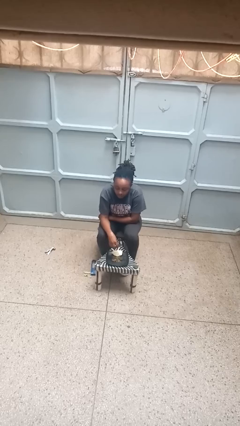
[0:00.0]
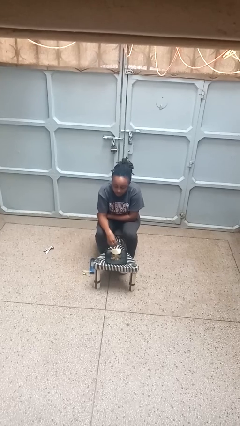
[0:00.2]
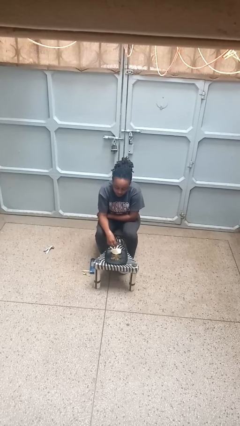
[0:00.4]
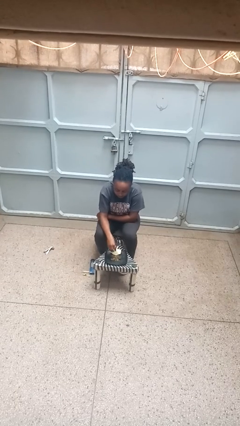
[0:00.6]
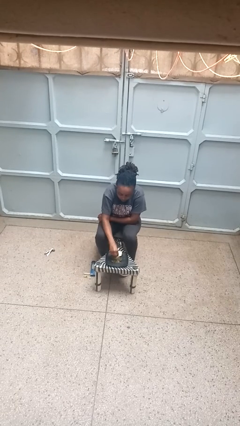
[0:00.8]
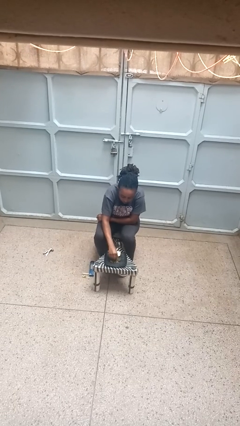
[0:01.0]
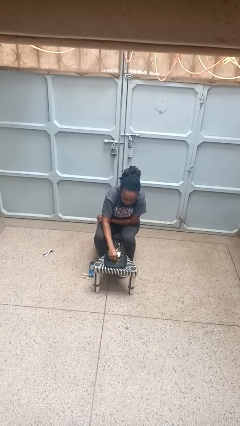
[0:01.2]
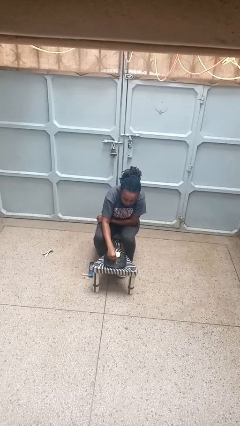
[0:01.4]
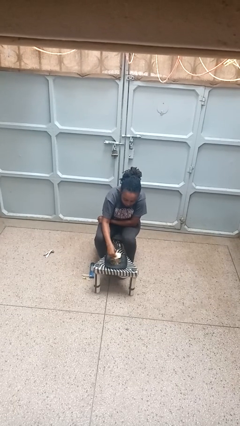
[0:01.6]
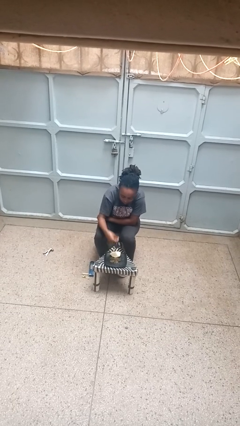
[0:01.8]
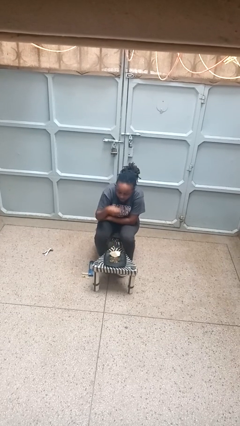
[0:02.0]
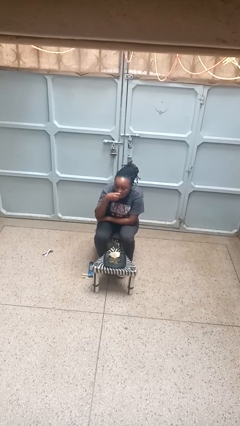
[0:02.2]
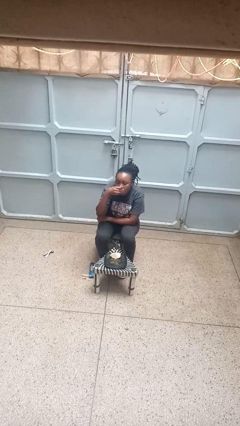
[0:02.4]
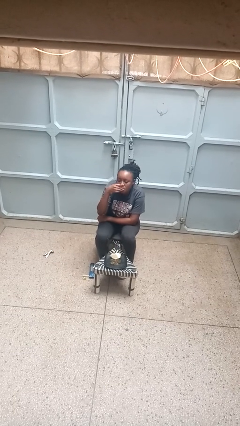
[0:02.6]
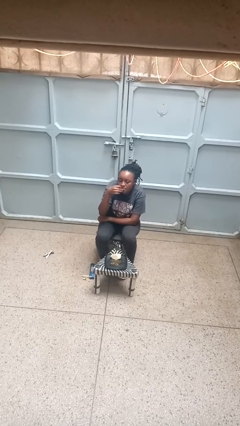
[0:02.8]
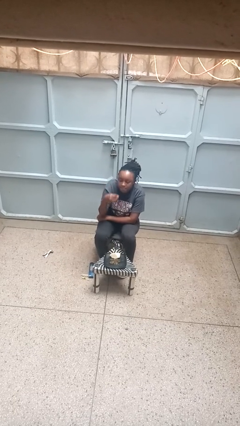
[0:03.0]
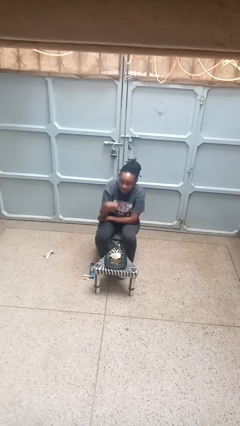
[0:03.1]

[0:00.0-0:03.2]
person eats with hands

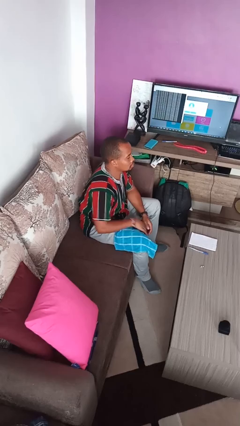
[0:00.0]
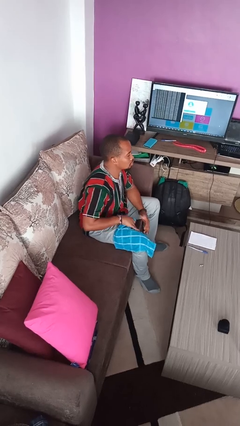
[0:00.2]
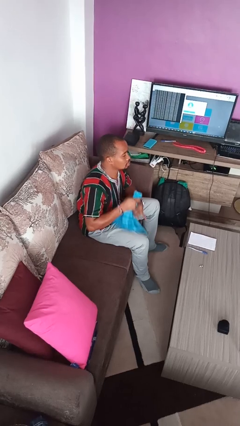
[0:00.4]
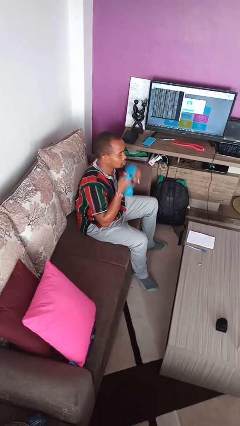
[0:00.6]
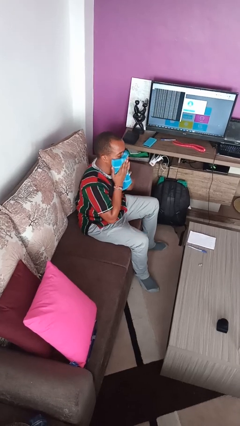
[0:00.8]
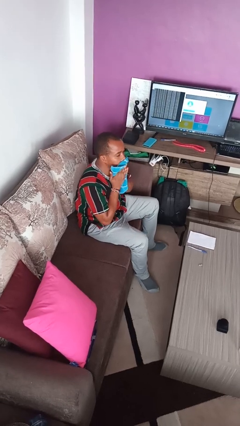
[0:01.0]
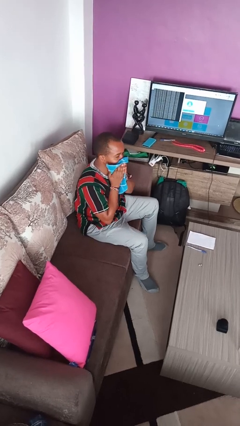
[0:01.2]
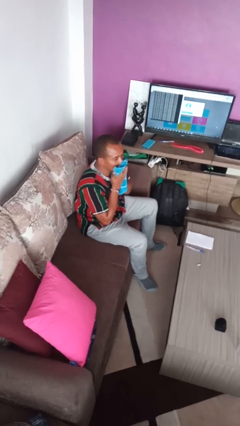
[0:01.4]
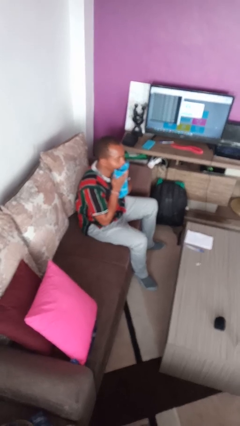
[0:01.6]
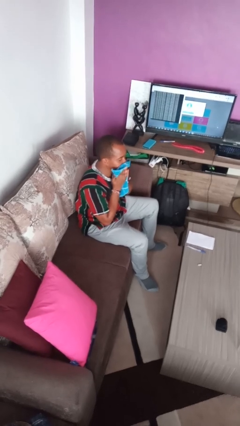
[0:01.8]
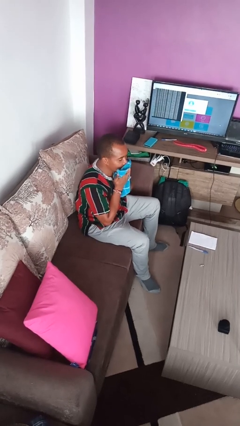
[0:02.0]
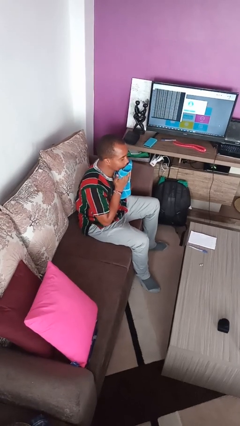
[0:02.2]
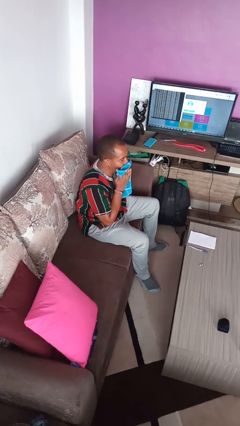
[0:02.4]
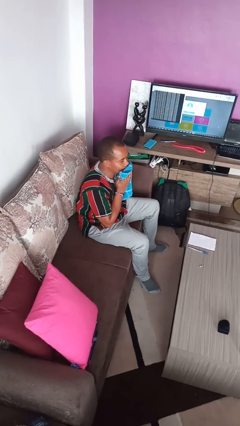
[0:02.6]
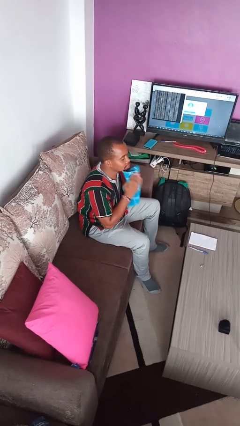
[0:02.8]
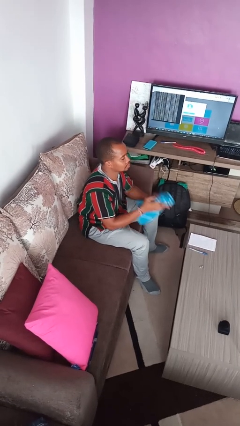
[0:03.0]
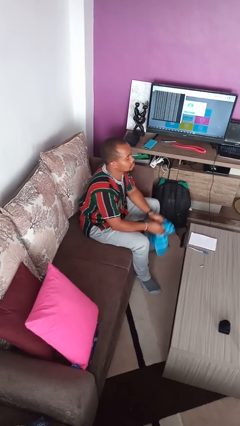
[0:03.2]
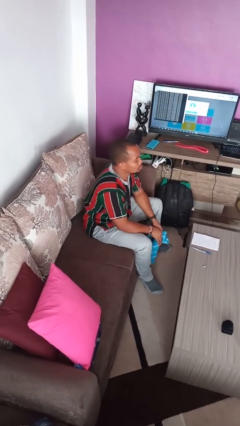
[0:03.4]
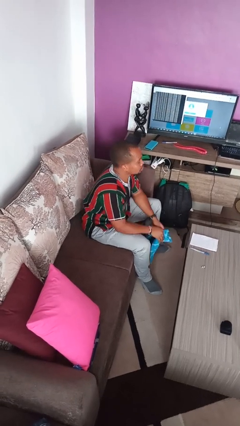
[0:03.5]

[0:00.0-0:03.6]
person wipes mouth with napkin

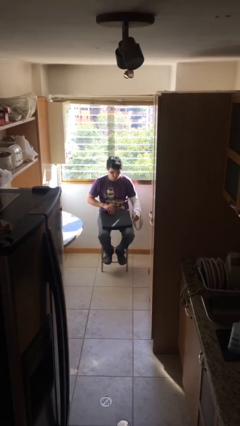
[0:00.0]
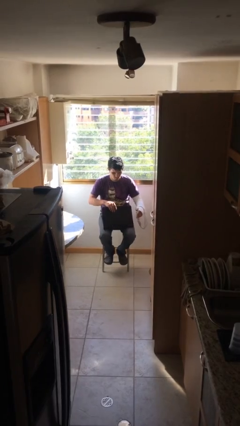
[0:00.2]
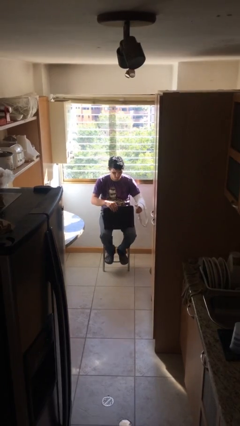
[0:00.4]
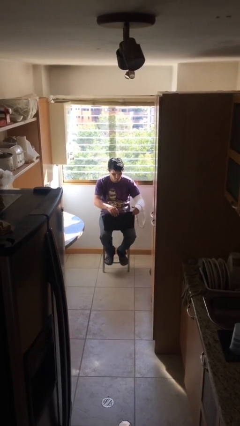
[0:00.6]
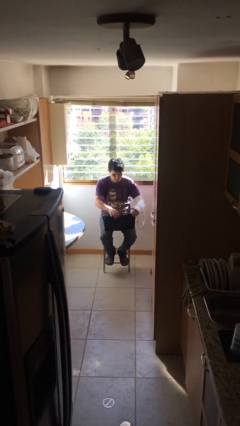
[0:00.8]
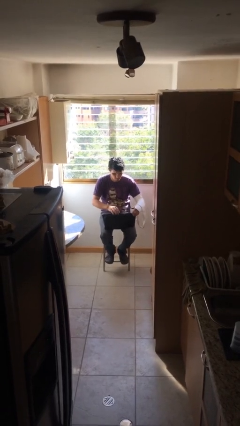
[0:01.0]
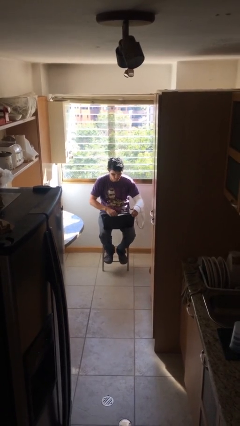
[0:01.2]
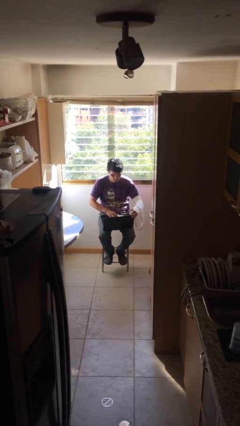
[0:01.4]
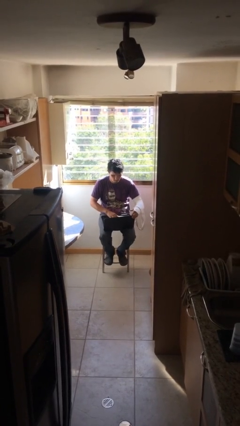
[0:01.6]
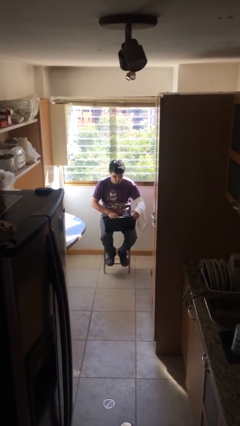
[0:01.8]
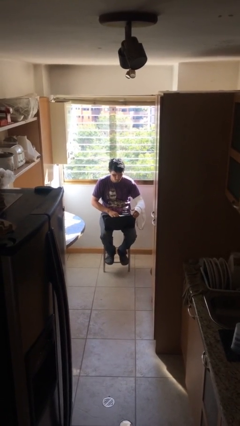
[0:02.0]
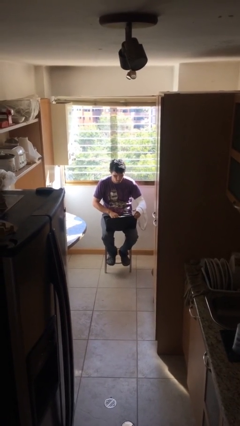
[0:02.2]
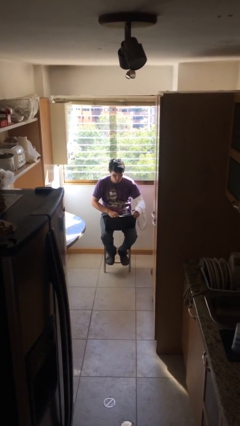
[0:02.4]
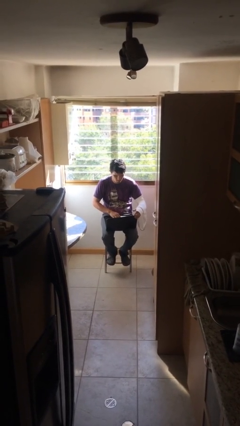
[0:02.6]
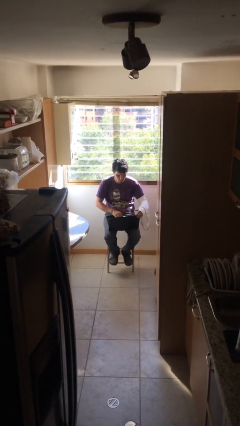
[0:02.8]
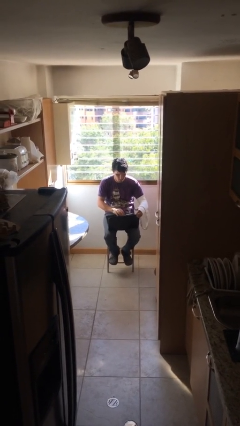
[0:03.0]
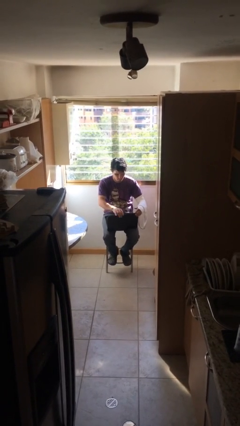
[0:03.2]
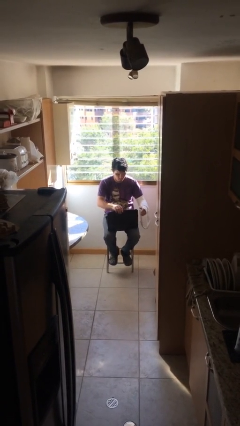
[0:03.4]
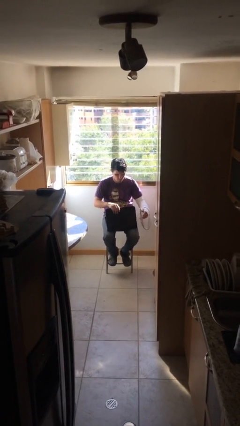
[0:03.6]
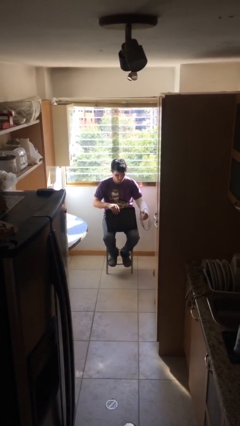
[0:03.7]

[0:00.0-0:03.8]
person interacts with laptop

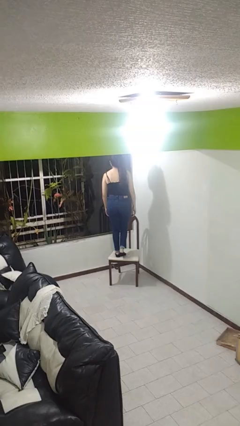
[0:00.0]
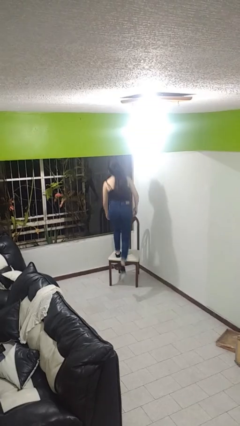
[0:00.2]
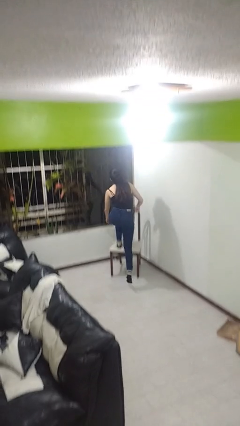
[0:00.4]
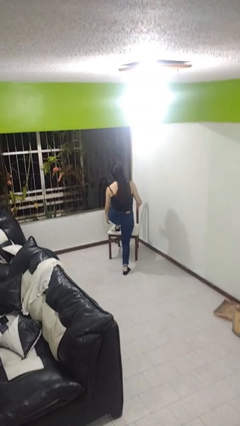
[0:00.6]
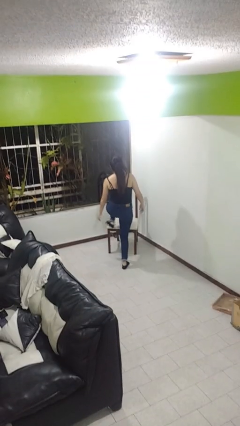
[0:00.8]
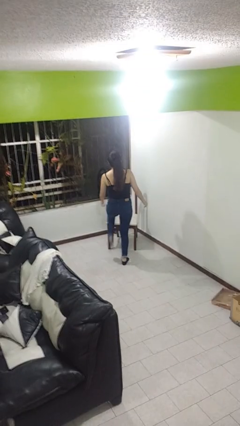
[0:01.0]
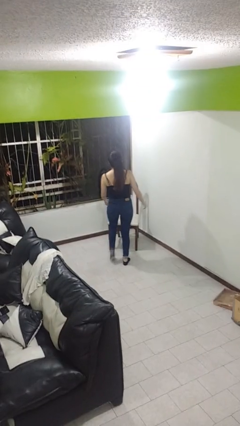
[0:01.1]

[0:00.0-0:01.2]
person climbs off chair

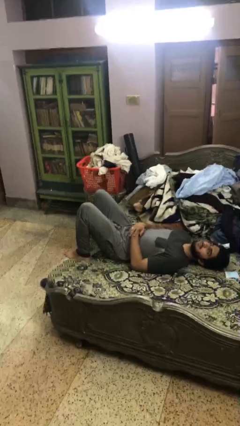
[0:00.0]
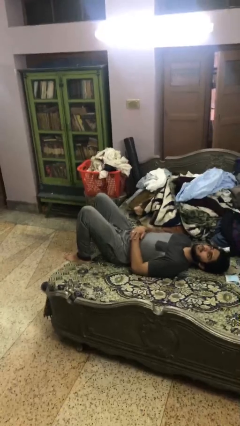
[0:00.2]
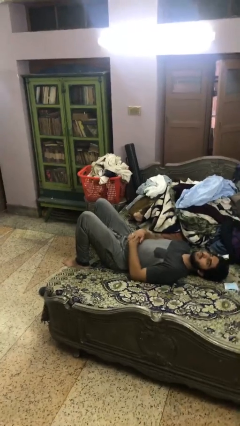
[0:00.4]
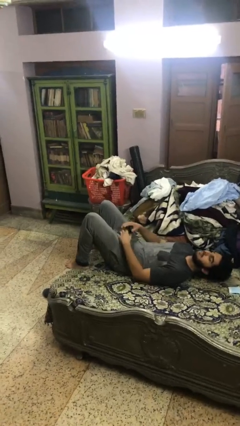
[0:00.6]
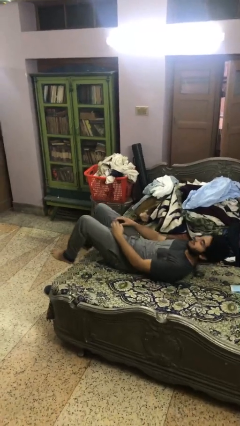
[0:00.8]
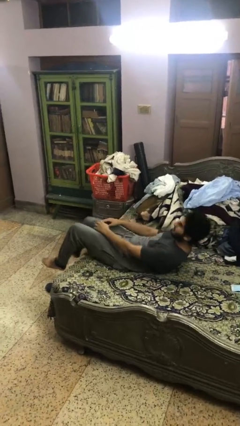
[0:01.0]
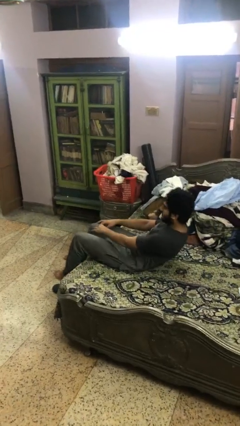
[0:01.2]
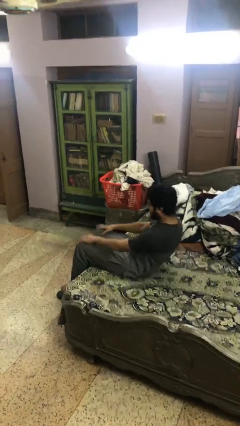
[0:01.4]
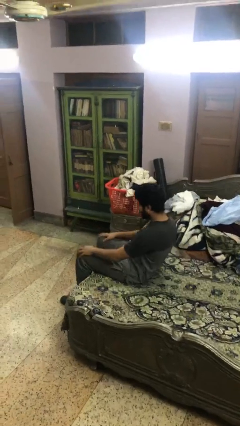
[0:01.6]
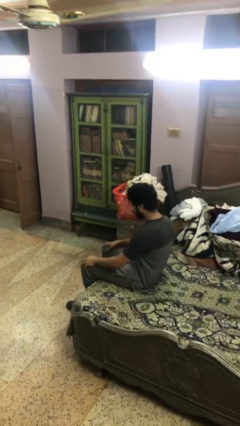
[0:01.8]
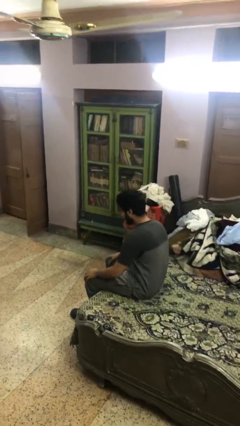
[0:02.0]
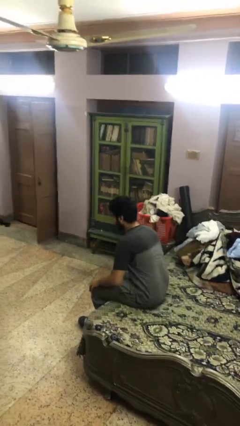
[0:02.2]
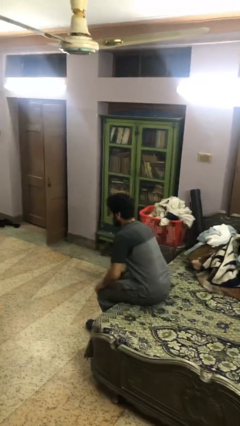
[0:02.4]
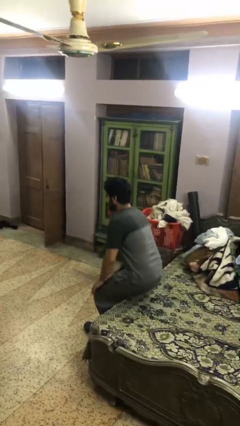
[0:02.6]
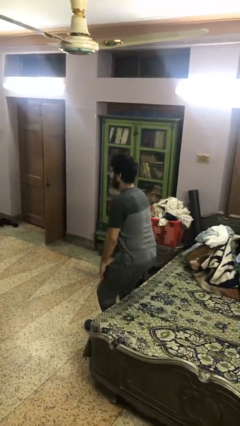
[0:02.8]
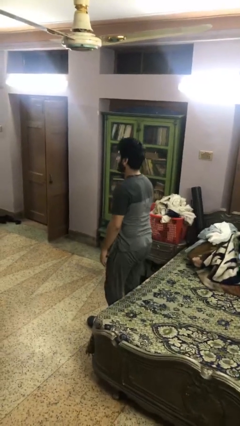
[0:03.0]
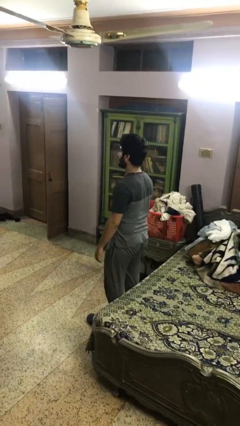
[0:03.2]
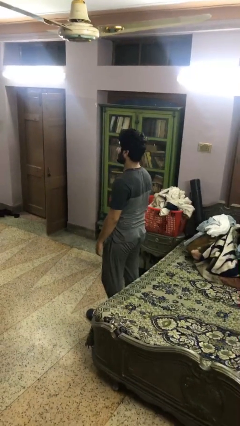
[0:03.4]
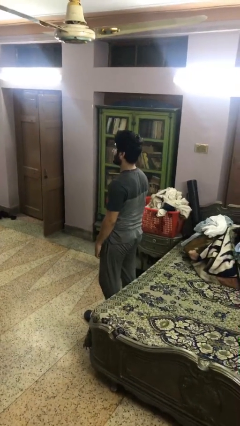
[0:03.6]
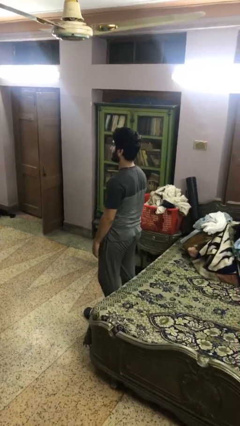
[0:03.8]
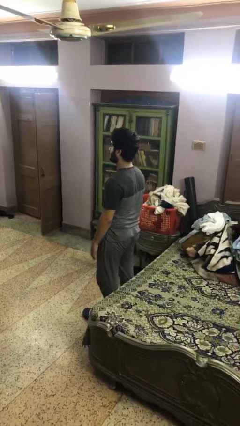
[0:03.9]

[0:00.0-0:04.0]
person stands up

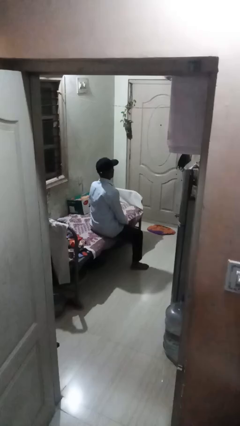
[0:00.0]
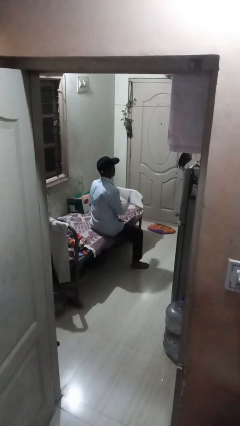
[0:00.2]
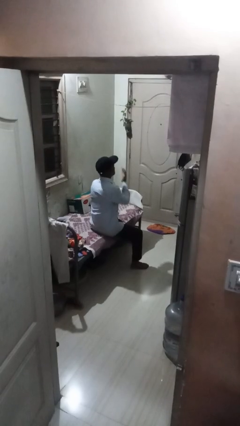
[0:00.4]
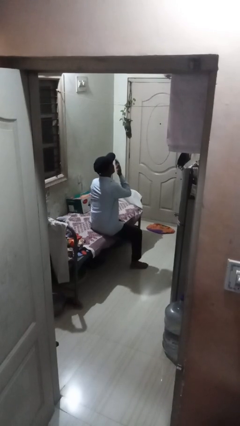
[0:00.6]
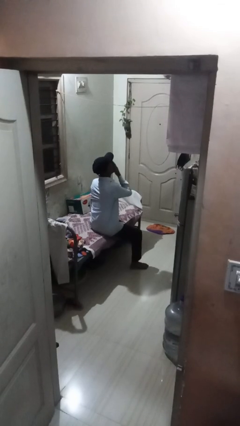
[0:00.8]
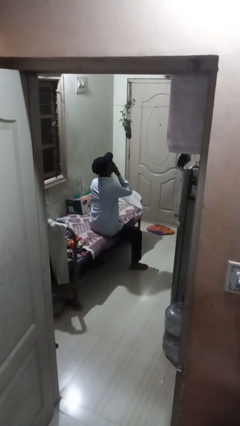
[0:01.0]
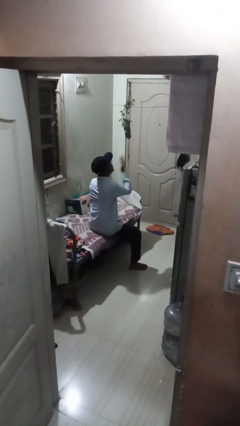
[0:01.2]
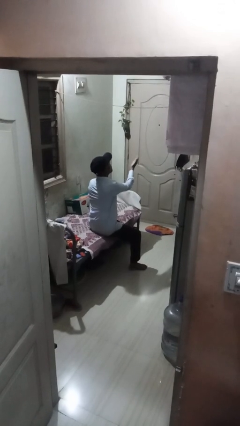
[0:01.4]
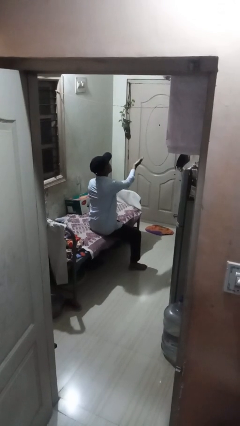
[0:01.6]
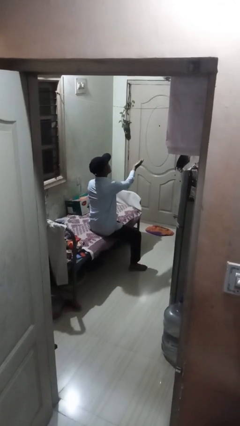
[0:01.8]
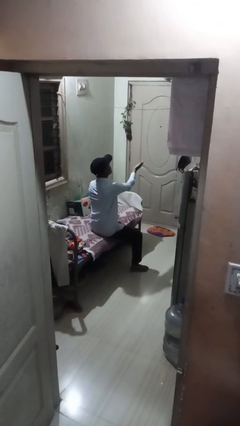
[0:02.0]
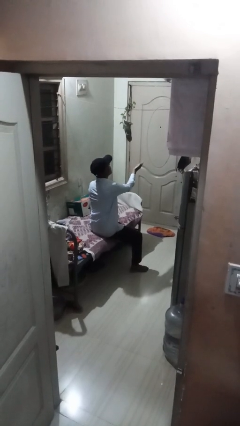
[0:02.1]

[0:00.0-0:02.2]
person gestures blow kiss
